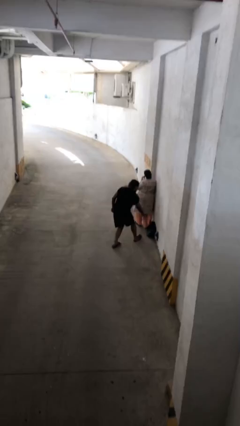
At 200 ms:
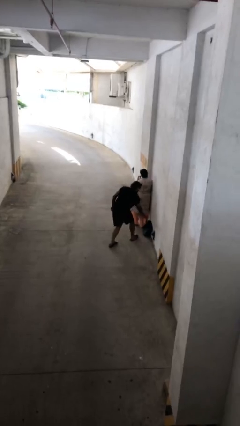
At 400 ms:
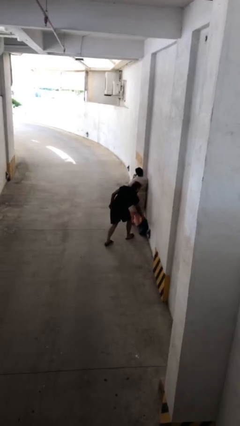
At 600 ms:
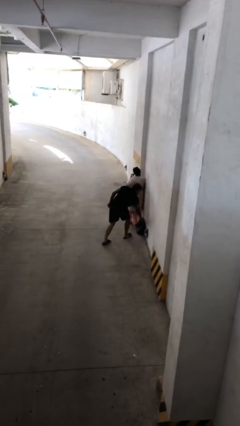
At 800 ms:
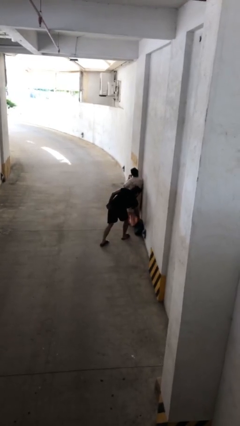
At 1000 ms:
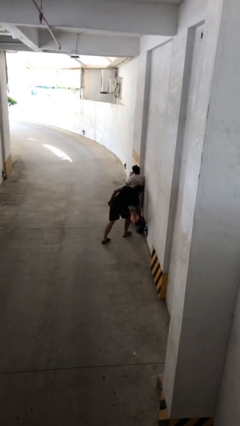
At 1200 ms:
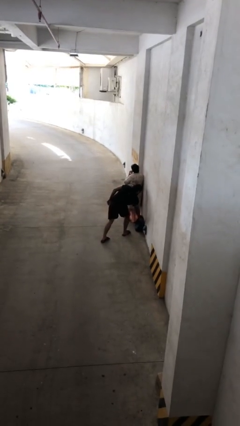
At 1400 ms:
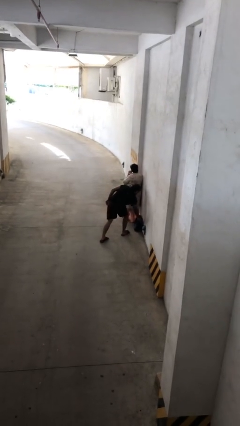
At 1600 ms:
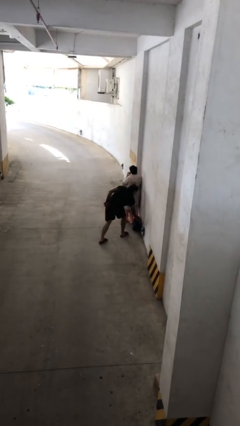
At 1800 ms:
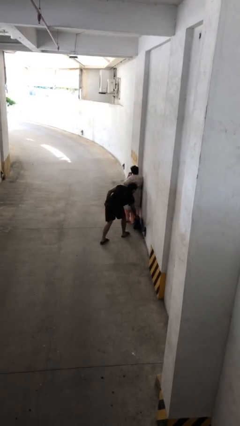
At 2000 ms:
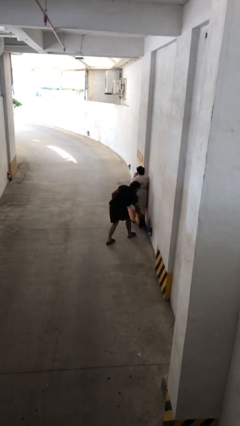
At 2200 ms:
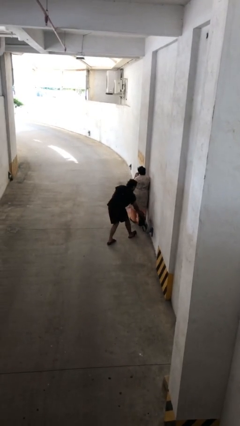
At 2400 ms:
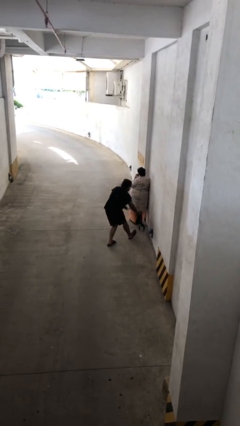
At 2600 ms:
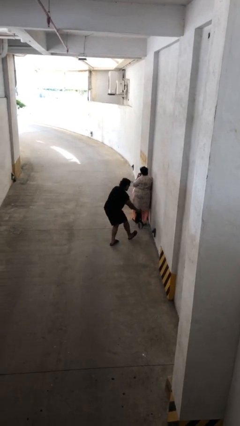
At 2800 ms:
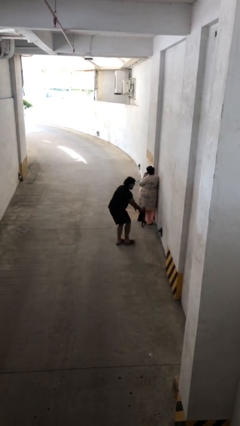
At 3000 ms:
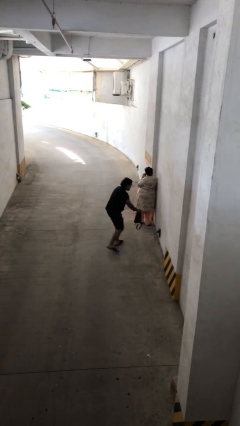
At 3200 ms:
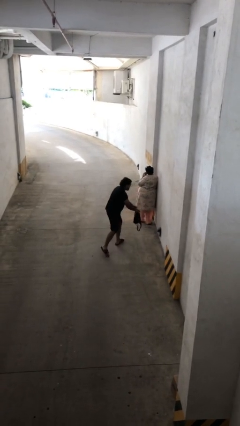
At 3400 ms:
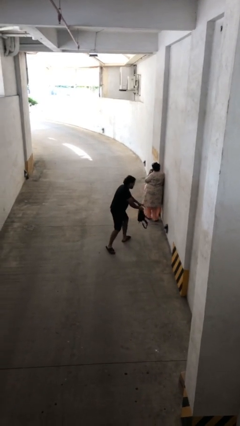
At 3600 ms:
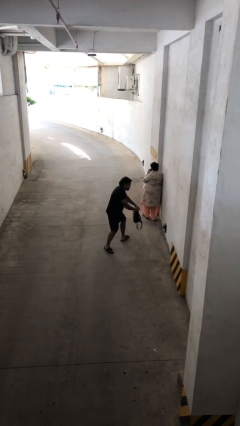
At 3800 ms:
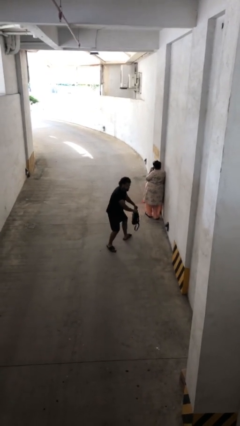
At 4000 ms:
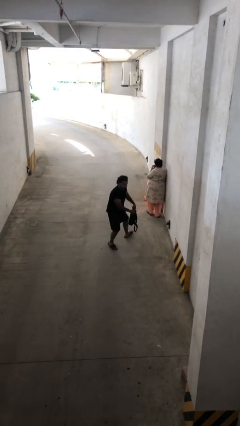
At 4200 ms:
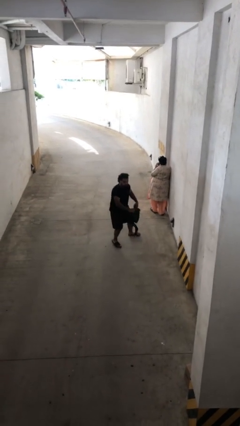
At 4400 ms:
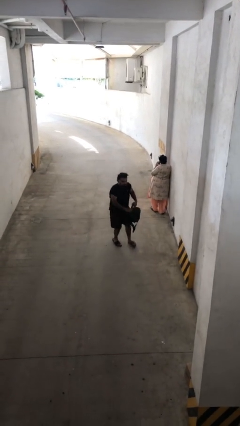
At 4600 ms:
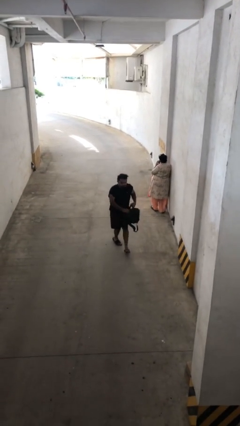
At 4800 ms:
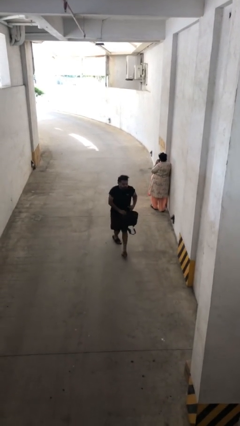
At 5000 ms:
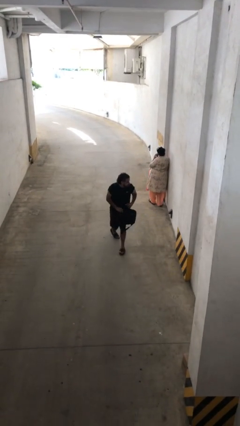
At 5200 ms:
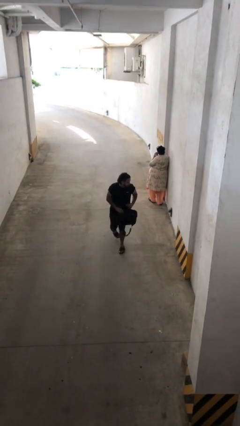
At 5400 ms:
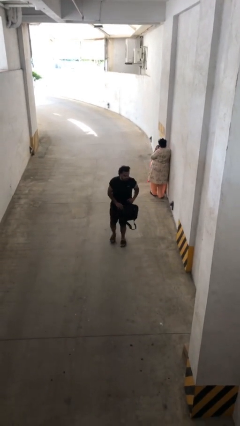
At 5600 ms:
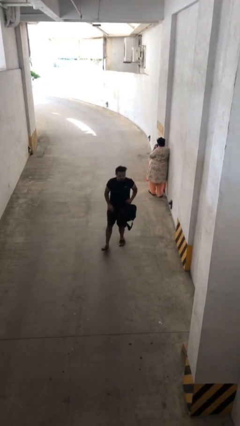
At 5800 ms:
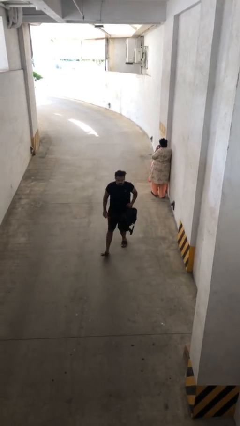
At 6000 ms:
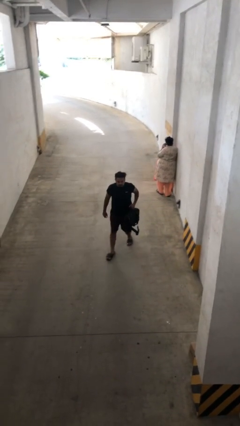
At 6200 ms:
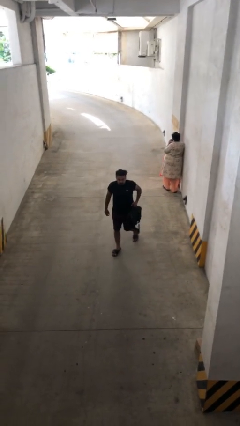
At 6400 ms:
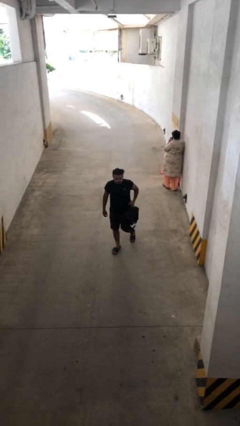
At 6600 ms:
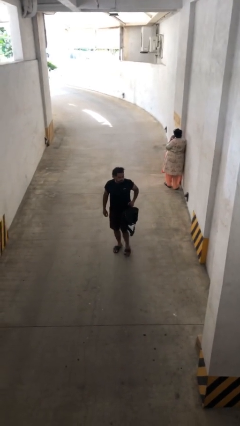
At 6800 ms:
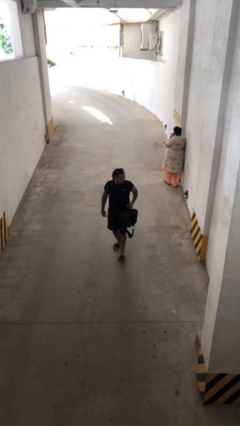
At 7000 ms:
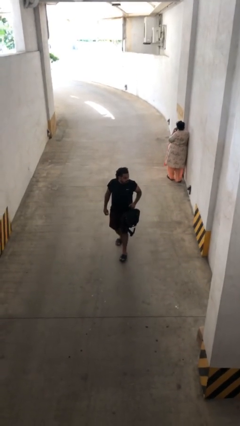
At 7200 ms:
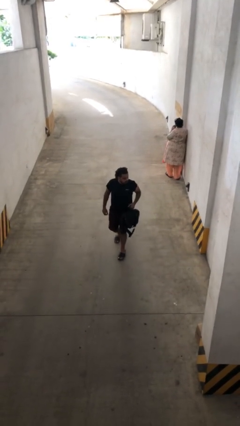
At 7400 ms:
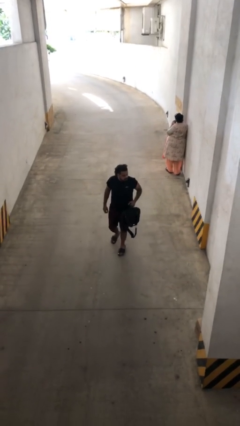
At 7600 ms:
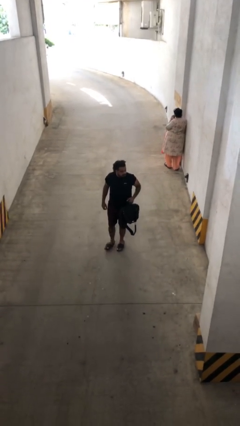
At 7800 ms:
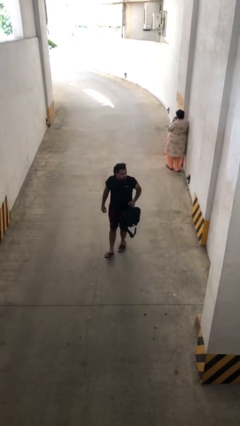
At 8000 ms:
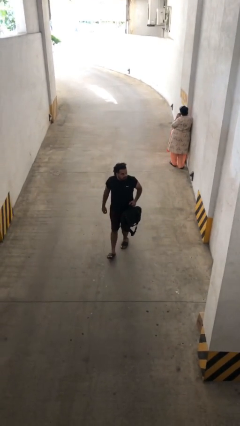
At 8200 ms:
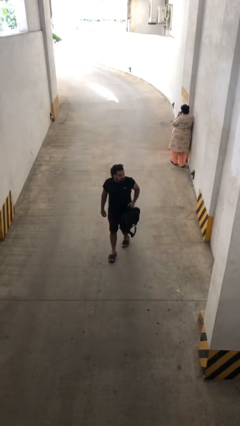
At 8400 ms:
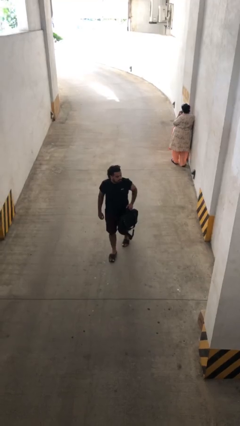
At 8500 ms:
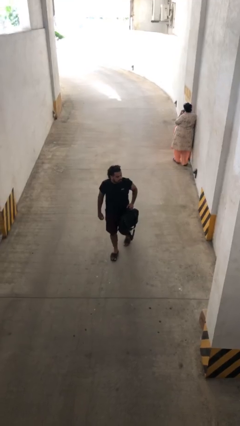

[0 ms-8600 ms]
person steals object from person

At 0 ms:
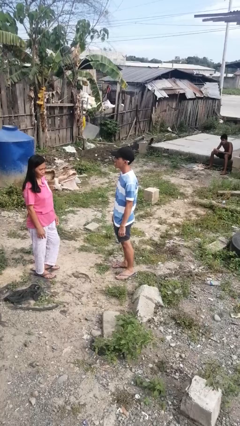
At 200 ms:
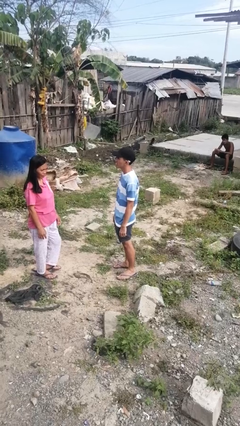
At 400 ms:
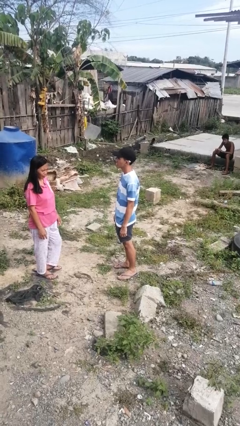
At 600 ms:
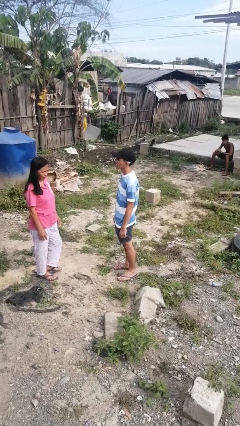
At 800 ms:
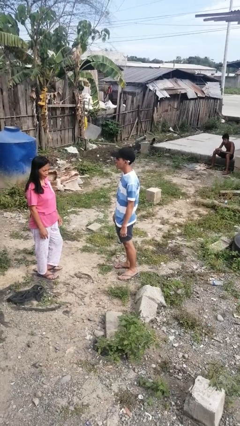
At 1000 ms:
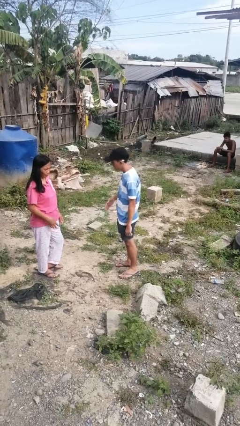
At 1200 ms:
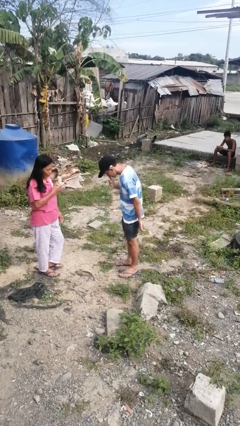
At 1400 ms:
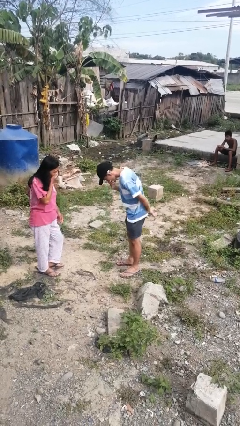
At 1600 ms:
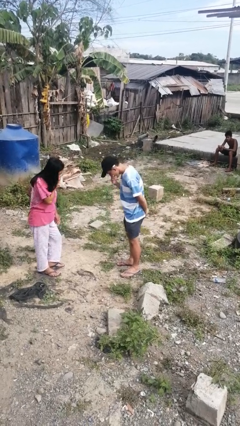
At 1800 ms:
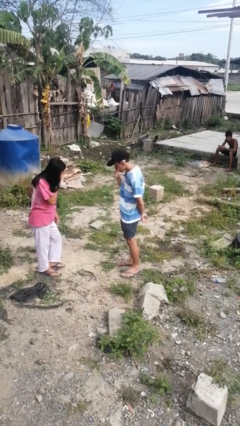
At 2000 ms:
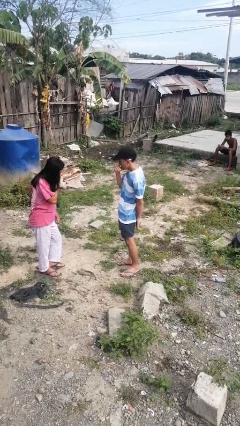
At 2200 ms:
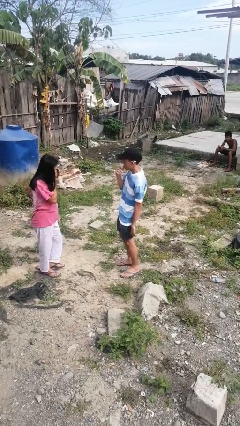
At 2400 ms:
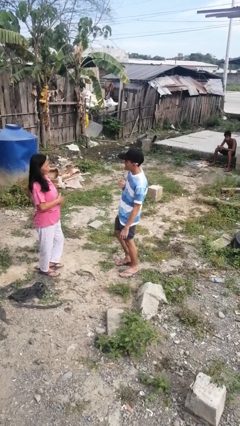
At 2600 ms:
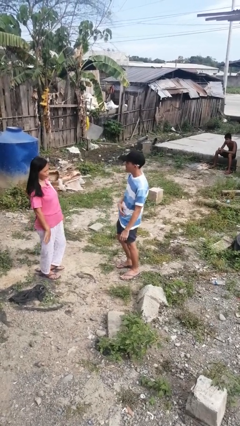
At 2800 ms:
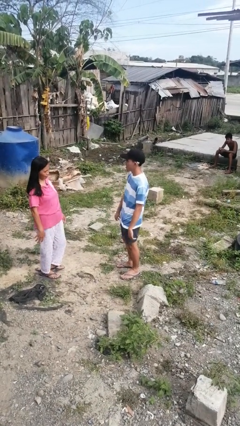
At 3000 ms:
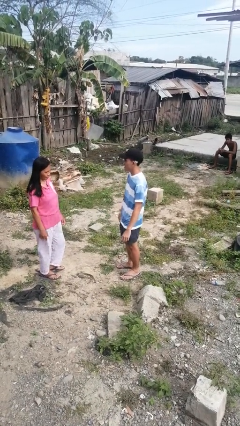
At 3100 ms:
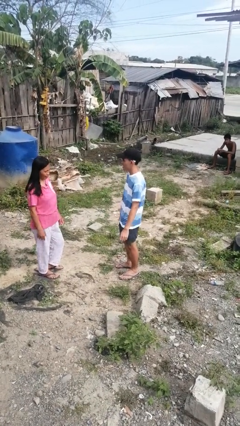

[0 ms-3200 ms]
person laughs with person

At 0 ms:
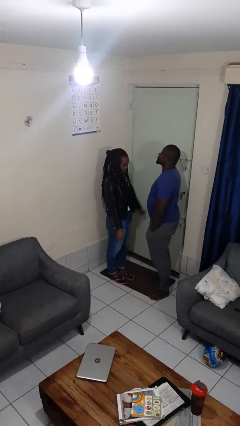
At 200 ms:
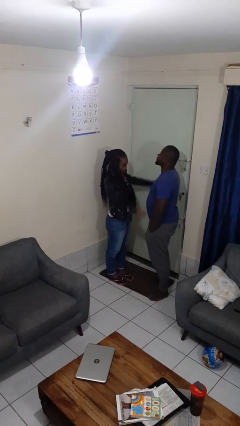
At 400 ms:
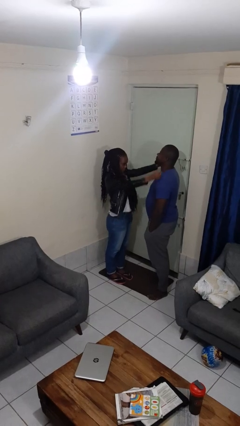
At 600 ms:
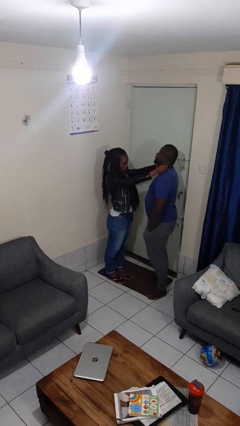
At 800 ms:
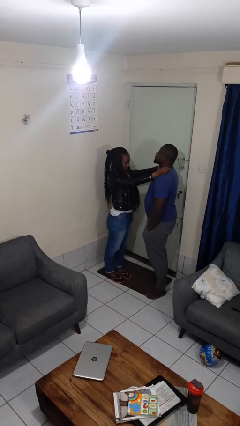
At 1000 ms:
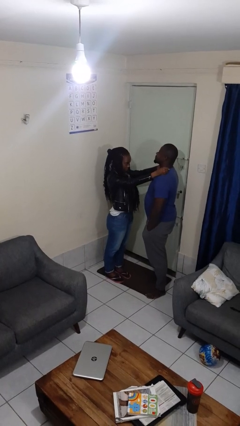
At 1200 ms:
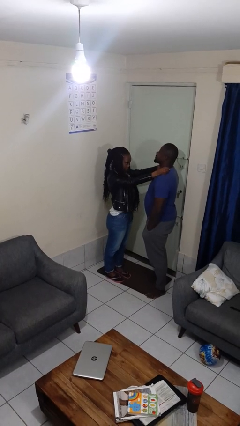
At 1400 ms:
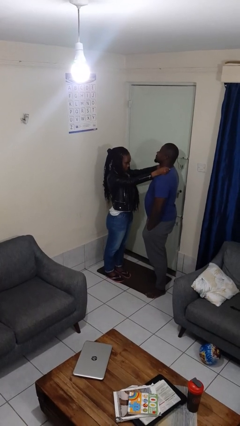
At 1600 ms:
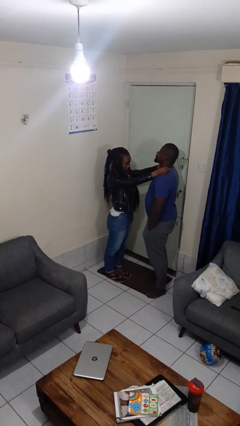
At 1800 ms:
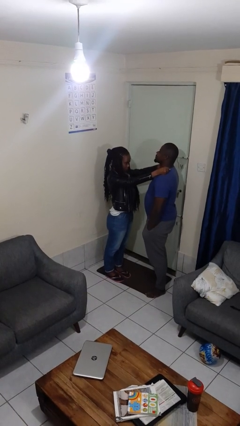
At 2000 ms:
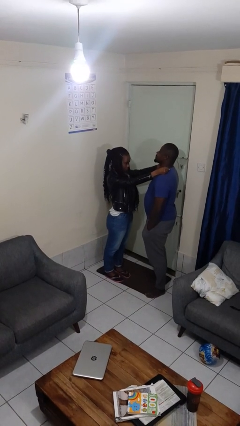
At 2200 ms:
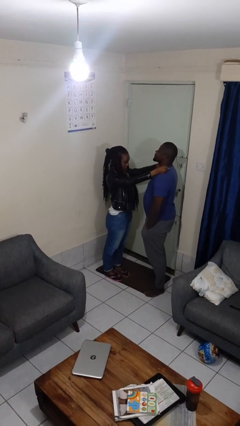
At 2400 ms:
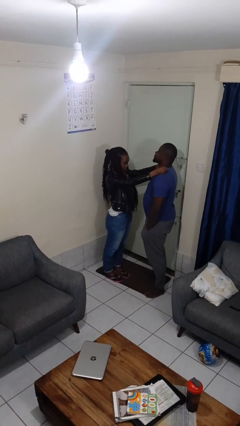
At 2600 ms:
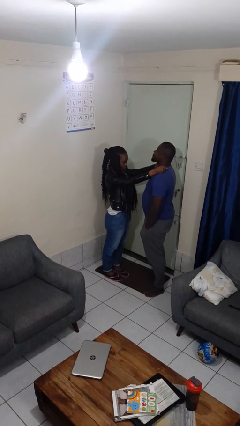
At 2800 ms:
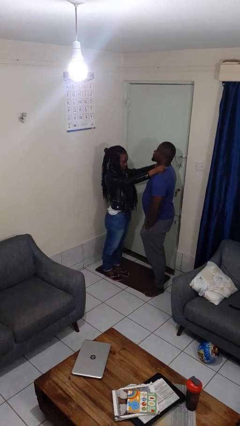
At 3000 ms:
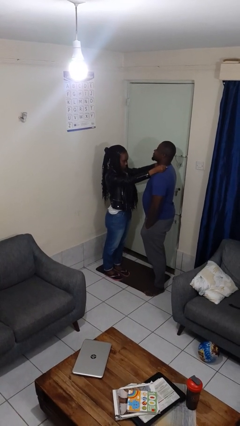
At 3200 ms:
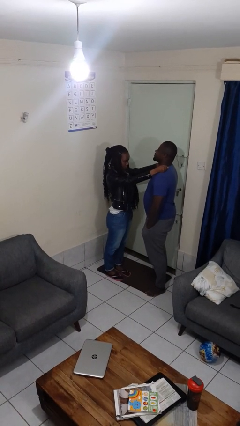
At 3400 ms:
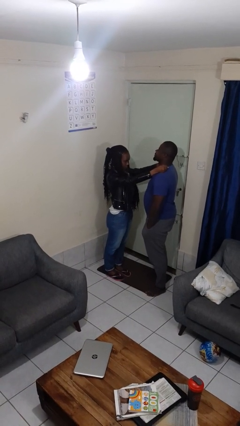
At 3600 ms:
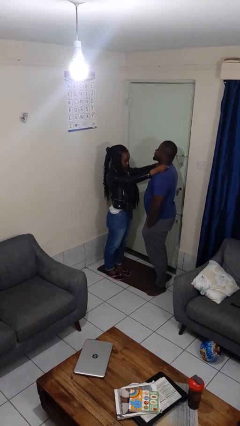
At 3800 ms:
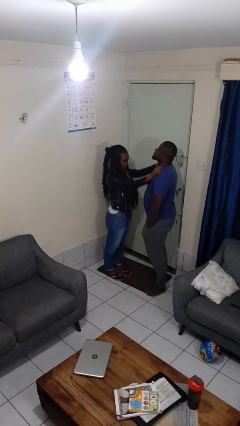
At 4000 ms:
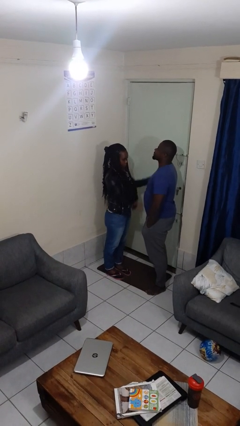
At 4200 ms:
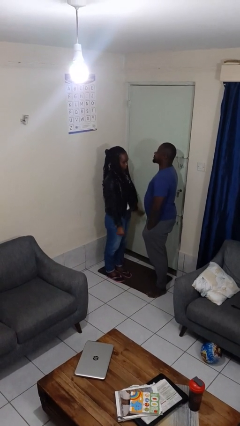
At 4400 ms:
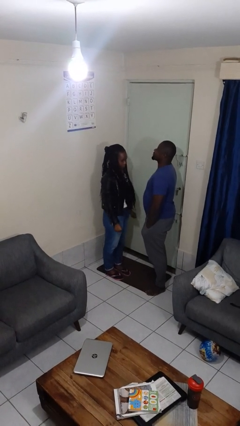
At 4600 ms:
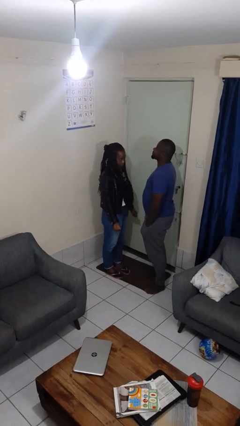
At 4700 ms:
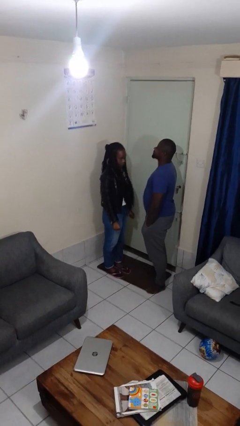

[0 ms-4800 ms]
person pounds shoulders of person

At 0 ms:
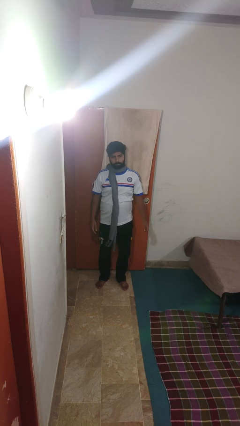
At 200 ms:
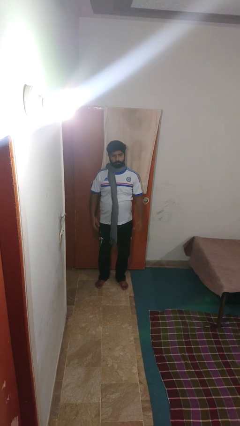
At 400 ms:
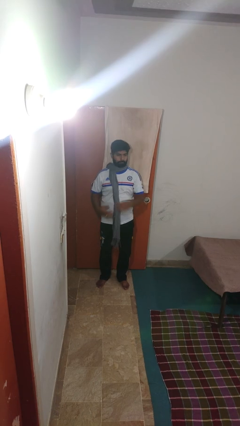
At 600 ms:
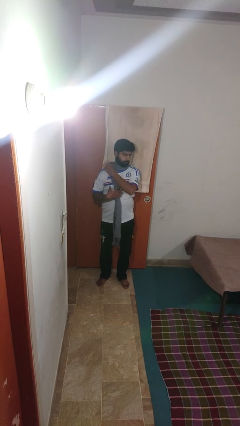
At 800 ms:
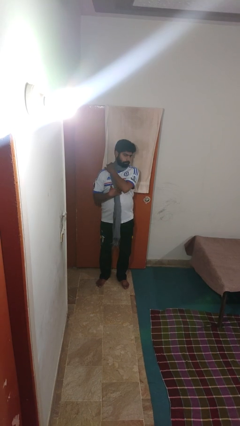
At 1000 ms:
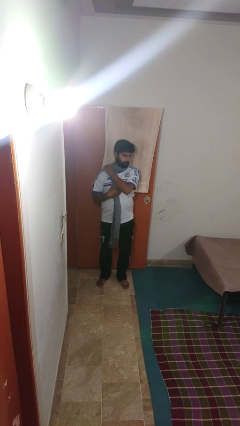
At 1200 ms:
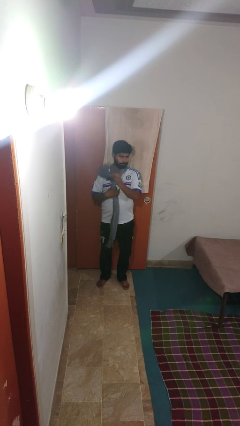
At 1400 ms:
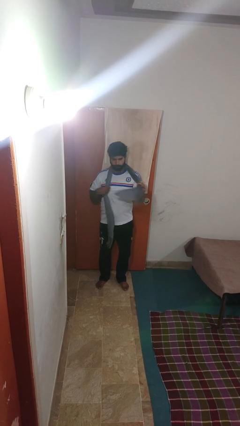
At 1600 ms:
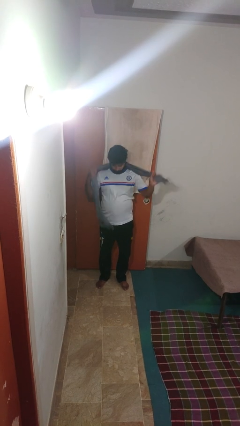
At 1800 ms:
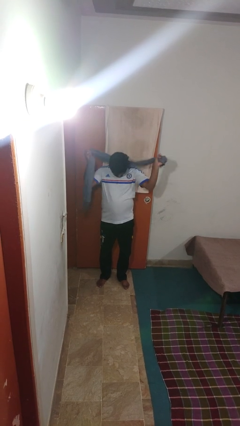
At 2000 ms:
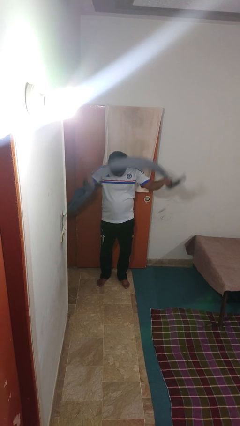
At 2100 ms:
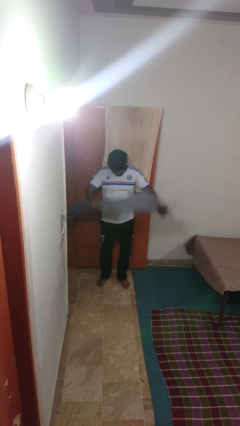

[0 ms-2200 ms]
person takes off scarf
